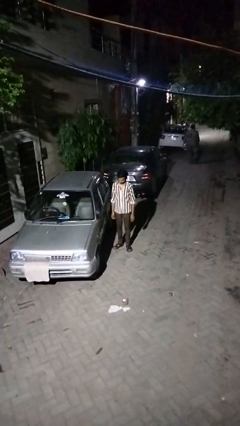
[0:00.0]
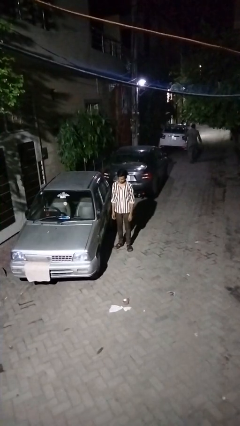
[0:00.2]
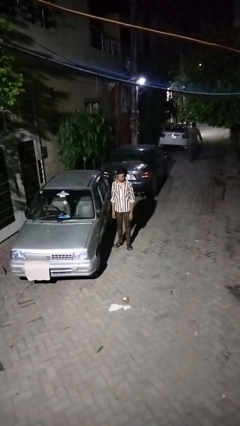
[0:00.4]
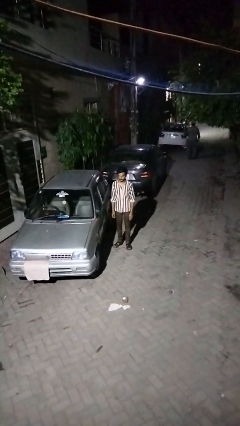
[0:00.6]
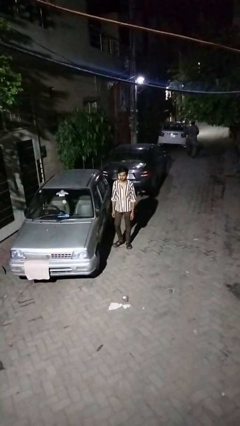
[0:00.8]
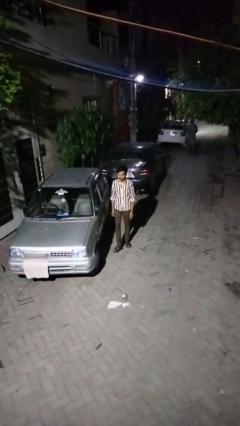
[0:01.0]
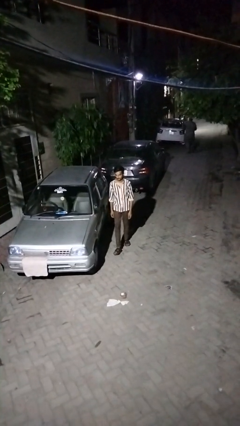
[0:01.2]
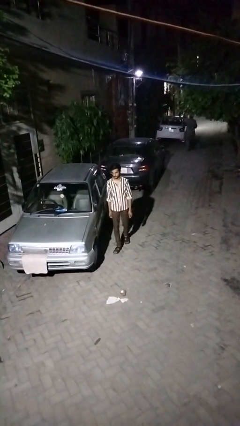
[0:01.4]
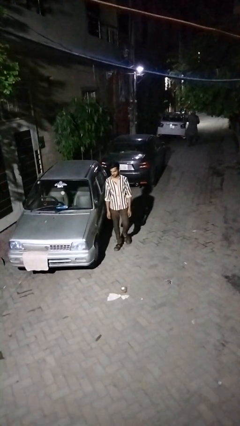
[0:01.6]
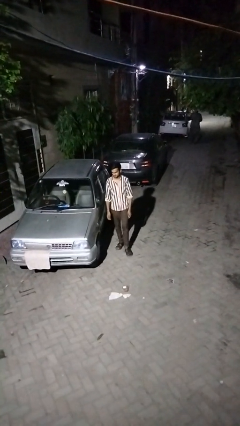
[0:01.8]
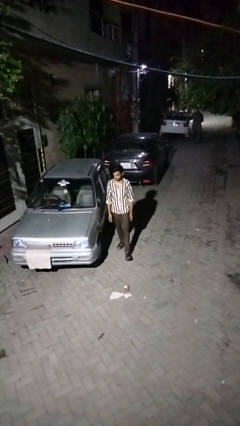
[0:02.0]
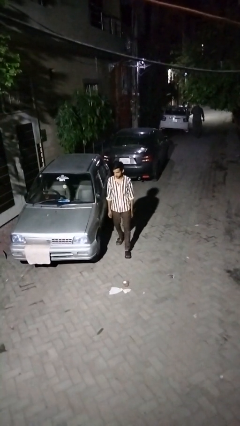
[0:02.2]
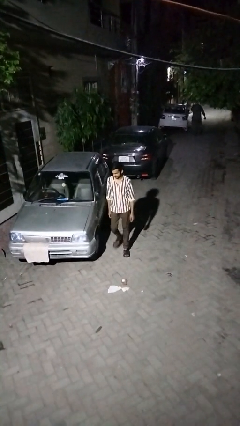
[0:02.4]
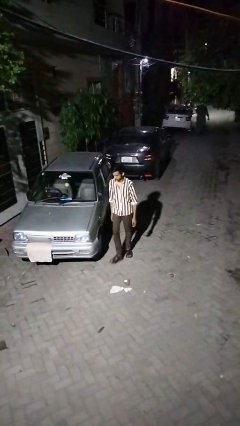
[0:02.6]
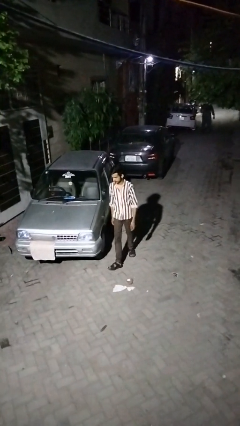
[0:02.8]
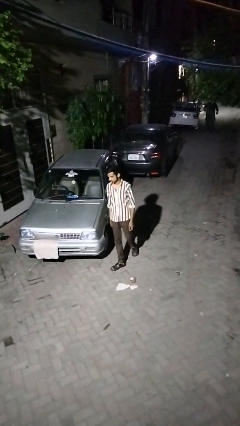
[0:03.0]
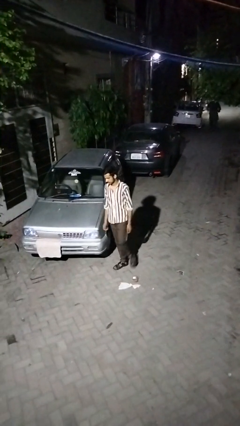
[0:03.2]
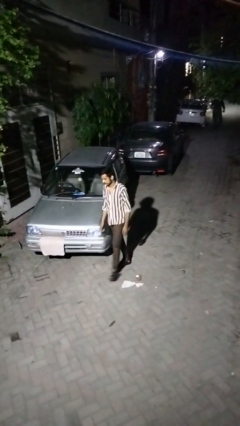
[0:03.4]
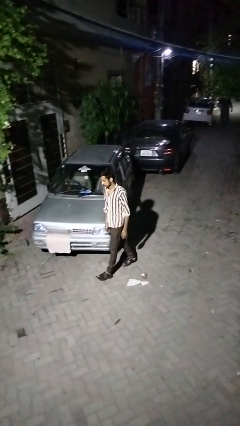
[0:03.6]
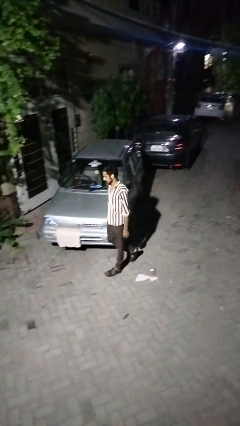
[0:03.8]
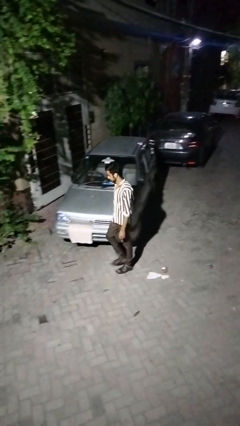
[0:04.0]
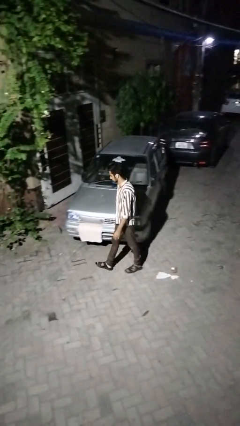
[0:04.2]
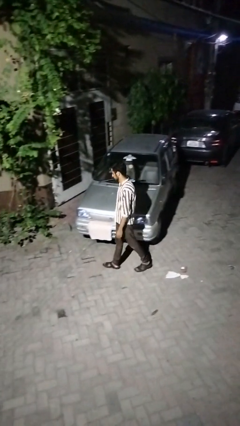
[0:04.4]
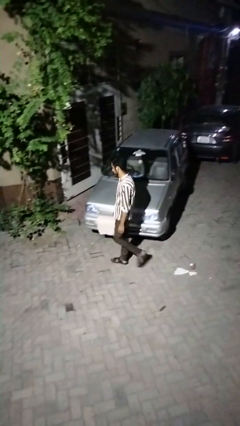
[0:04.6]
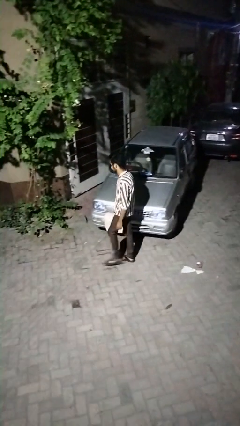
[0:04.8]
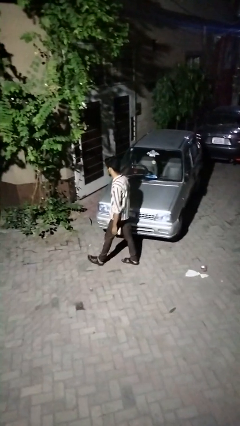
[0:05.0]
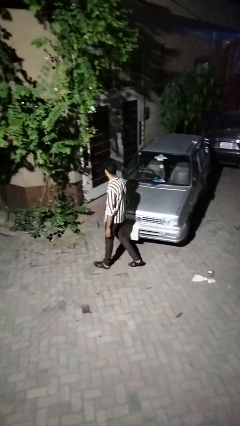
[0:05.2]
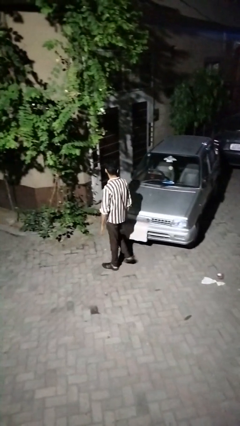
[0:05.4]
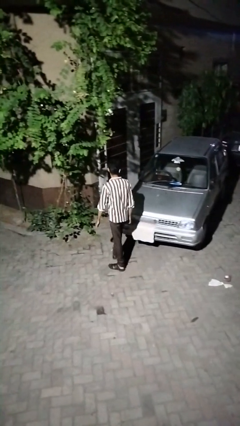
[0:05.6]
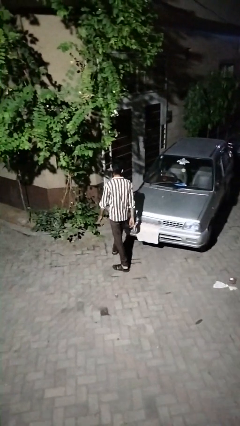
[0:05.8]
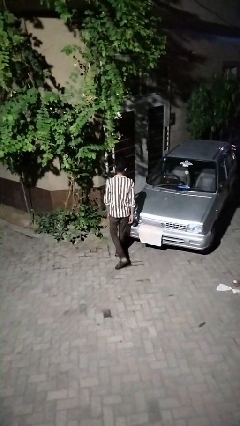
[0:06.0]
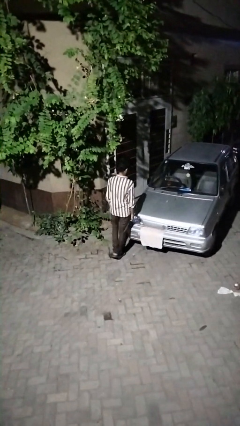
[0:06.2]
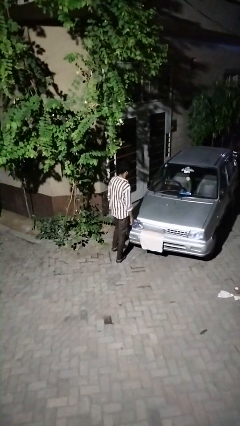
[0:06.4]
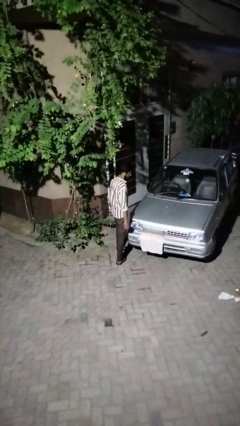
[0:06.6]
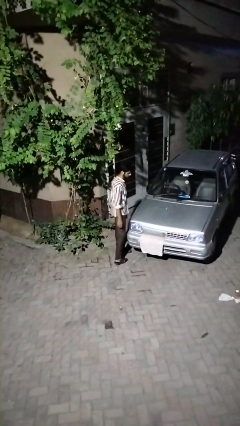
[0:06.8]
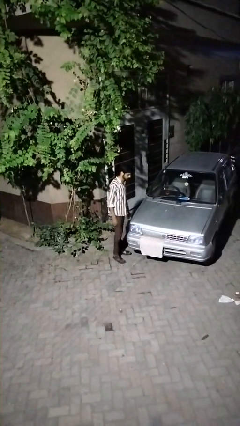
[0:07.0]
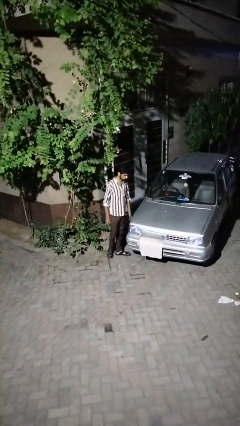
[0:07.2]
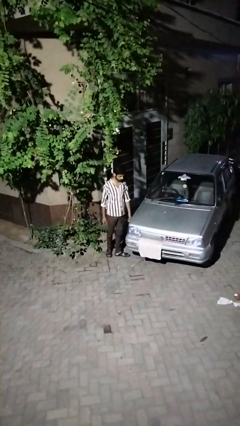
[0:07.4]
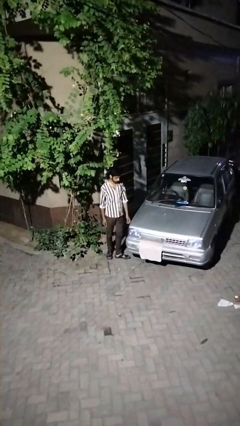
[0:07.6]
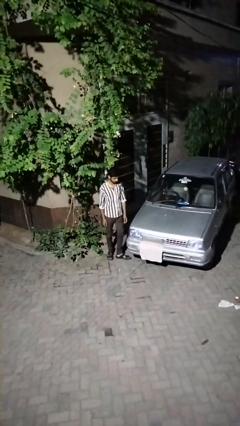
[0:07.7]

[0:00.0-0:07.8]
person walks around car

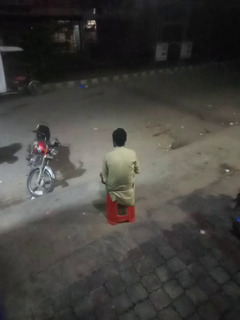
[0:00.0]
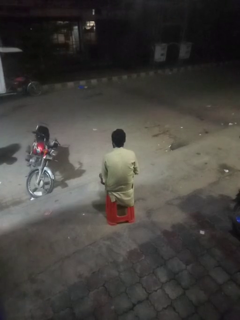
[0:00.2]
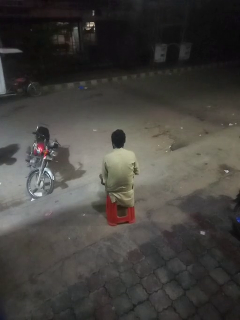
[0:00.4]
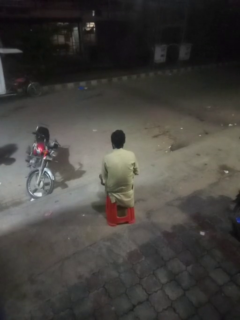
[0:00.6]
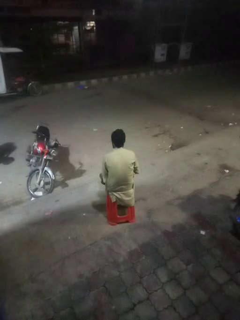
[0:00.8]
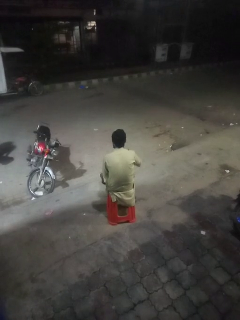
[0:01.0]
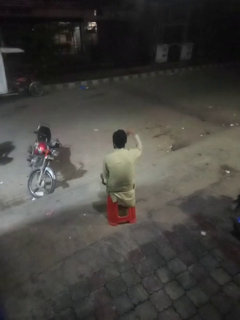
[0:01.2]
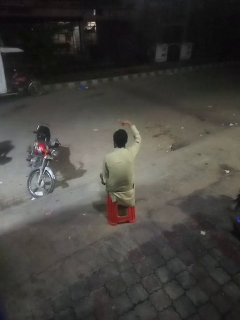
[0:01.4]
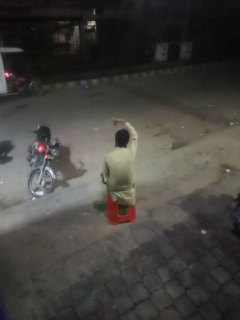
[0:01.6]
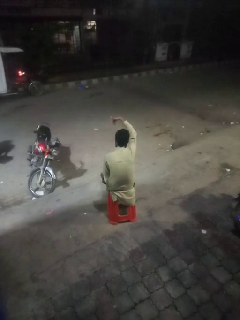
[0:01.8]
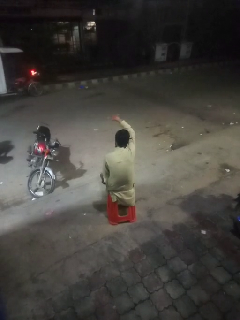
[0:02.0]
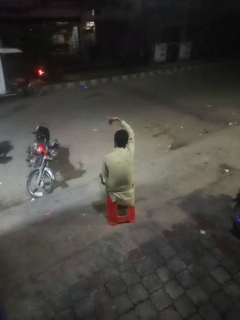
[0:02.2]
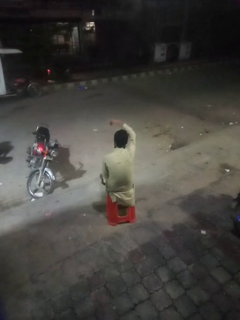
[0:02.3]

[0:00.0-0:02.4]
person gestures hang loose

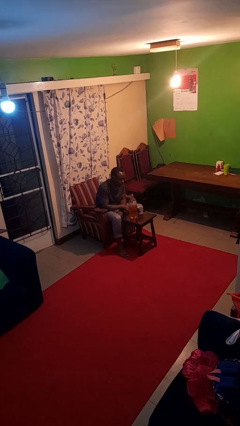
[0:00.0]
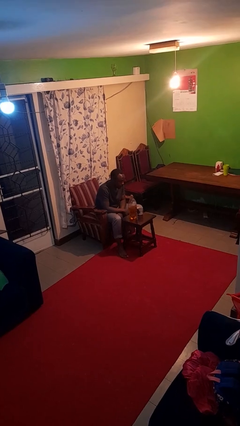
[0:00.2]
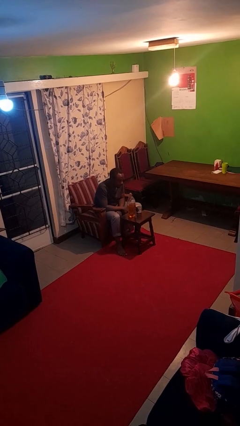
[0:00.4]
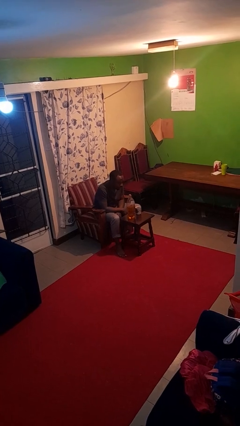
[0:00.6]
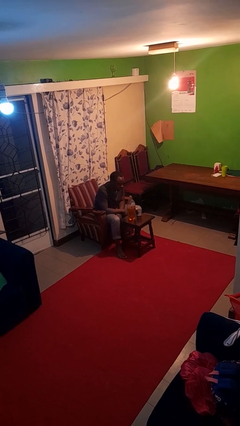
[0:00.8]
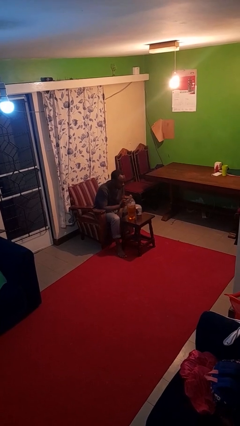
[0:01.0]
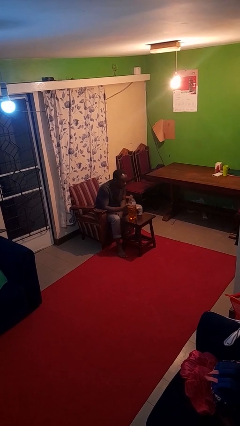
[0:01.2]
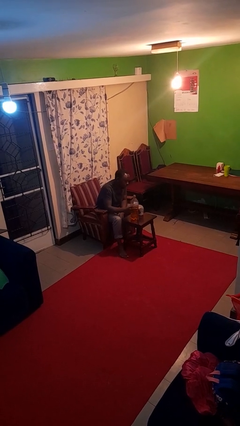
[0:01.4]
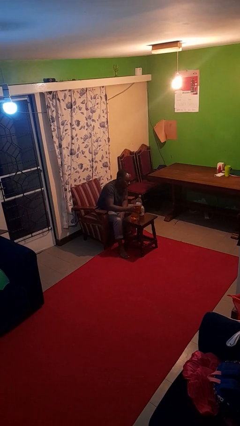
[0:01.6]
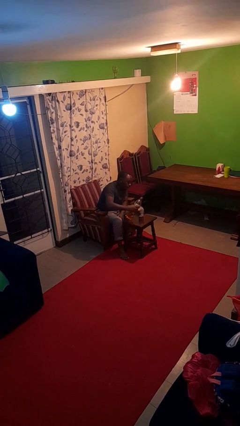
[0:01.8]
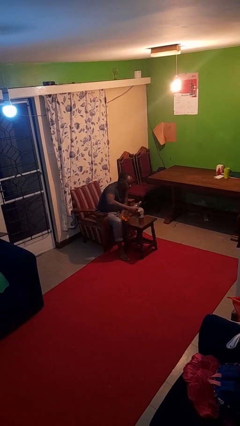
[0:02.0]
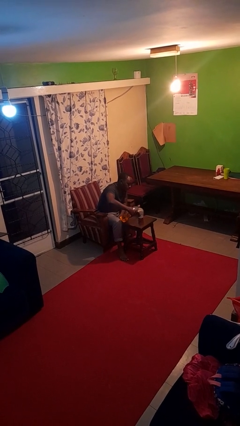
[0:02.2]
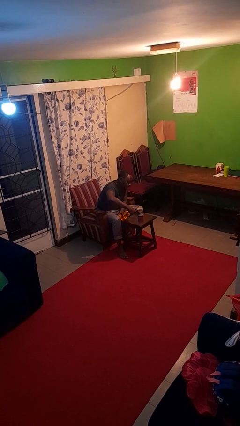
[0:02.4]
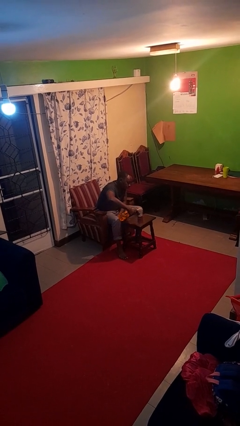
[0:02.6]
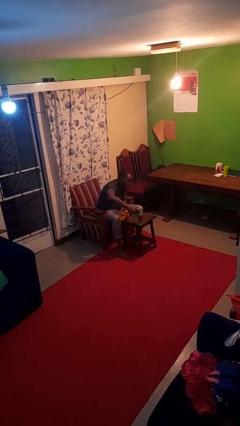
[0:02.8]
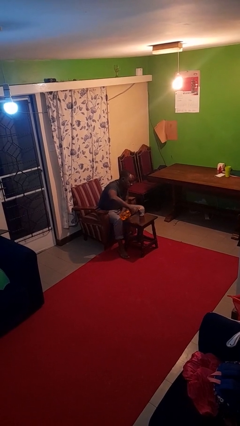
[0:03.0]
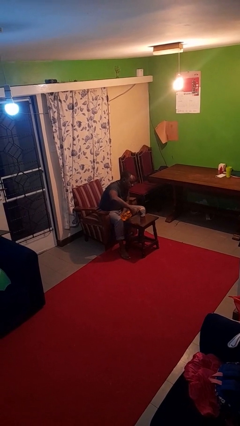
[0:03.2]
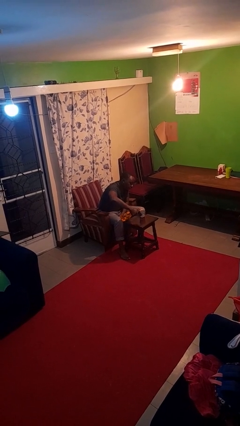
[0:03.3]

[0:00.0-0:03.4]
person pours liquid into cup

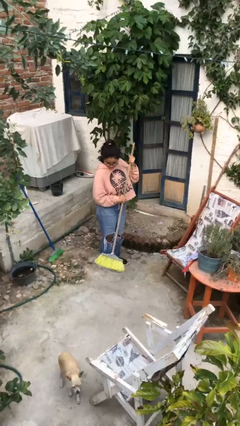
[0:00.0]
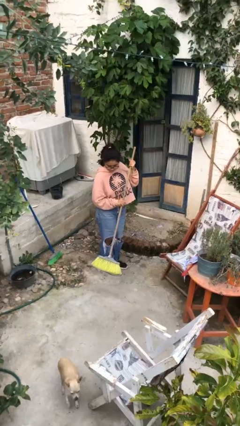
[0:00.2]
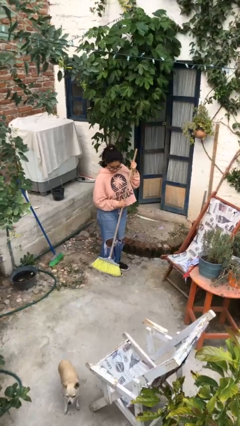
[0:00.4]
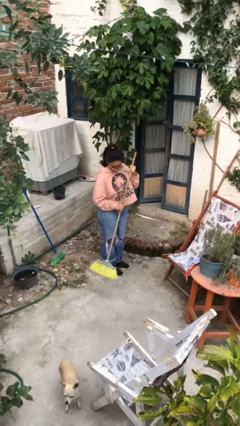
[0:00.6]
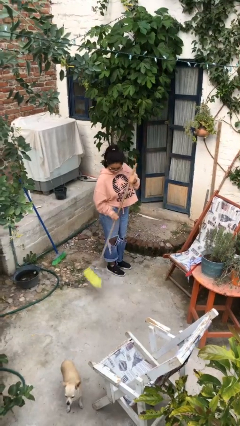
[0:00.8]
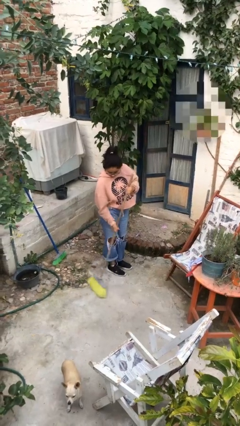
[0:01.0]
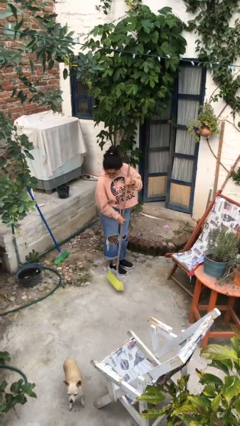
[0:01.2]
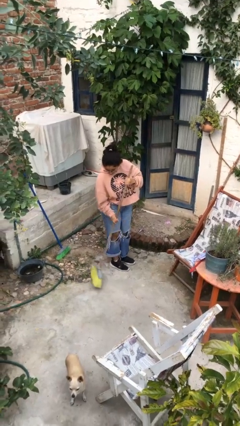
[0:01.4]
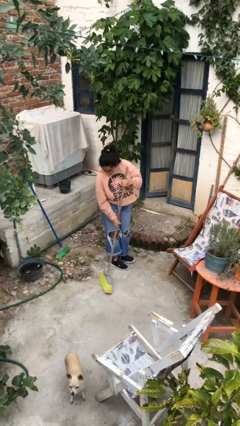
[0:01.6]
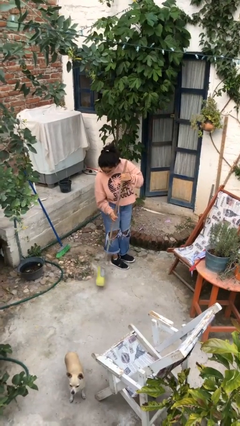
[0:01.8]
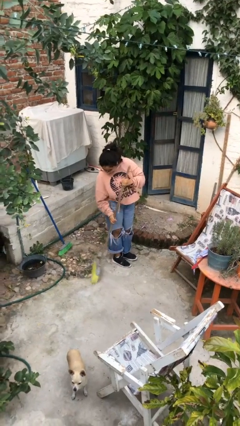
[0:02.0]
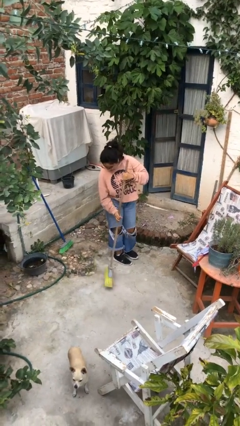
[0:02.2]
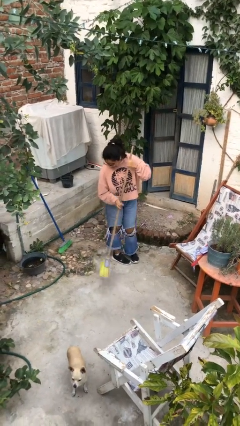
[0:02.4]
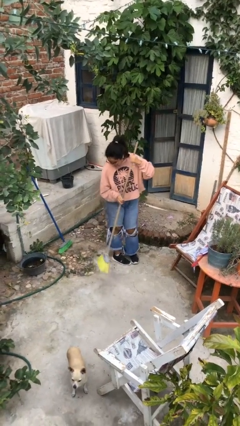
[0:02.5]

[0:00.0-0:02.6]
person sweeps floor

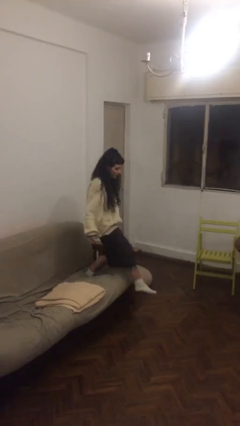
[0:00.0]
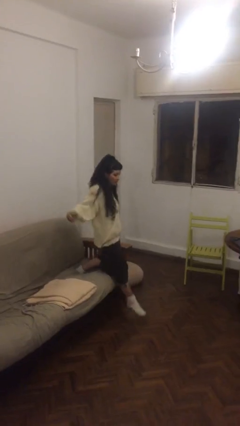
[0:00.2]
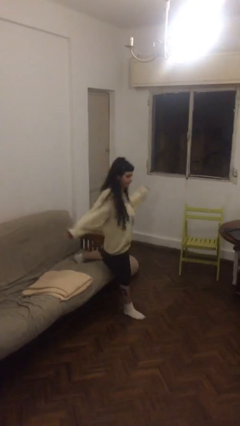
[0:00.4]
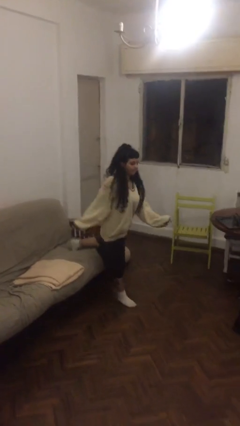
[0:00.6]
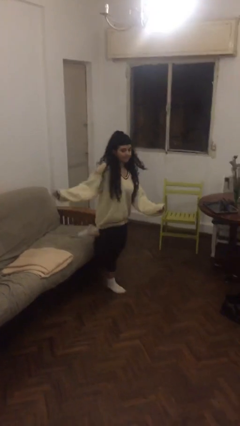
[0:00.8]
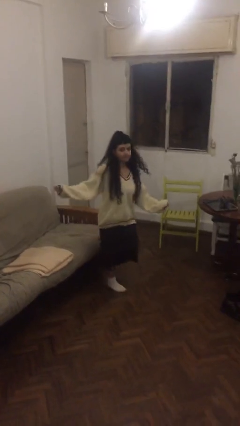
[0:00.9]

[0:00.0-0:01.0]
person climbs off couch

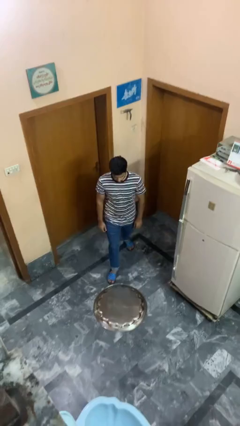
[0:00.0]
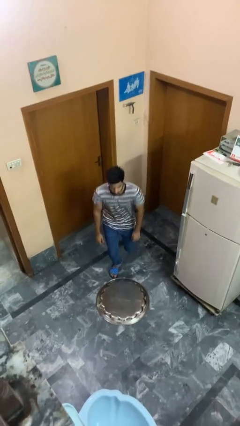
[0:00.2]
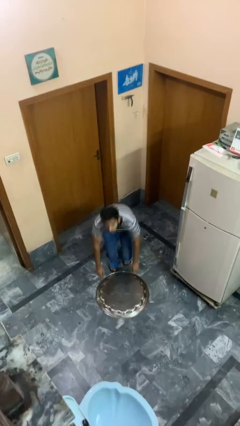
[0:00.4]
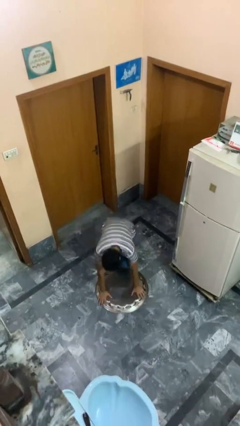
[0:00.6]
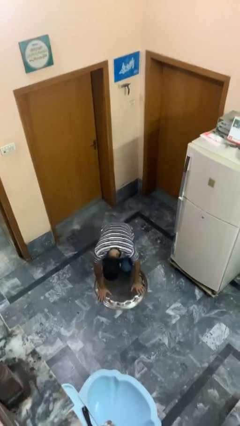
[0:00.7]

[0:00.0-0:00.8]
person trips on object on floor
